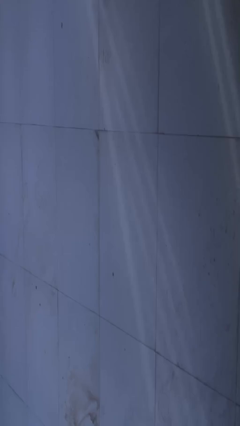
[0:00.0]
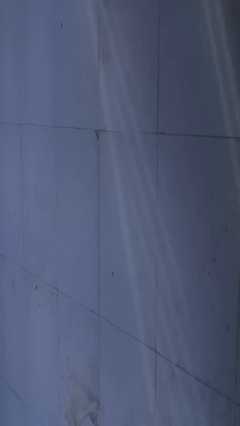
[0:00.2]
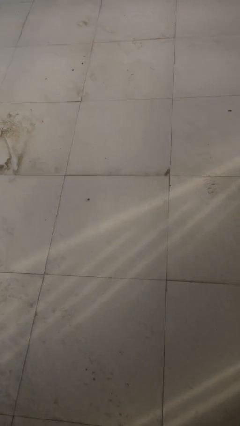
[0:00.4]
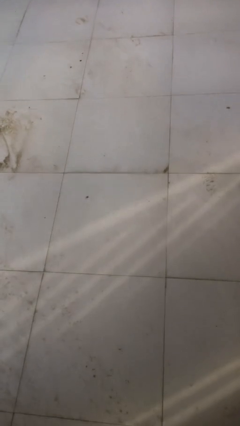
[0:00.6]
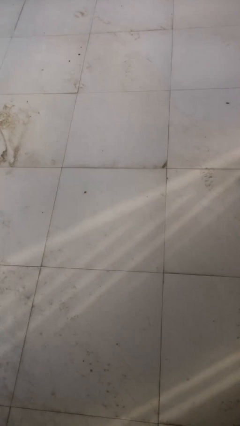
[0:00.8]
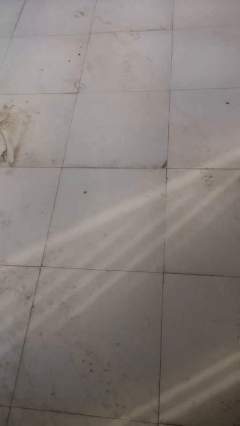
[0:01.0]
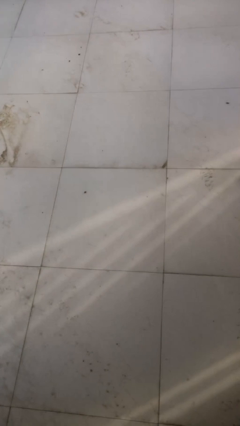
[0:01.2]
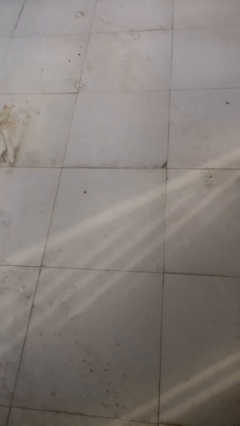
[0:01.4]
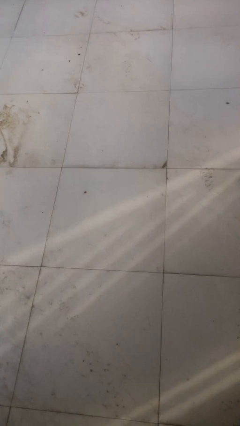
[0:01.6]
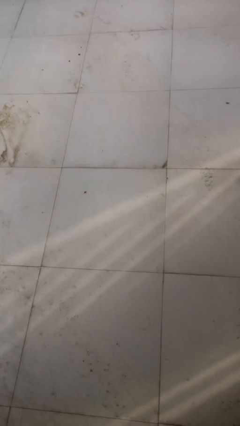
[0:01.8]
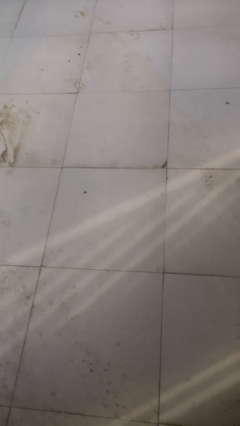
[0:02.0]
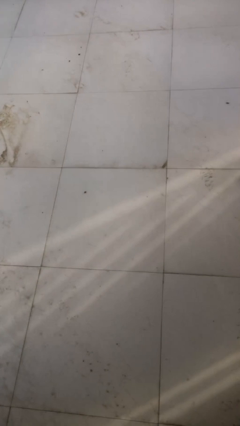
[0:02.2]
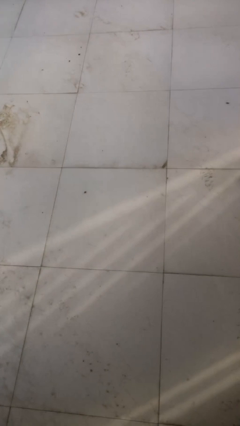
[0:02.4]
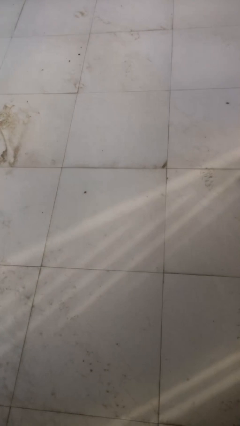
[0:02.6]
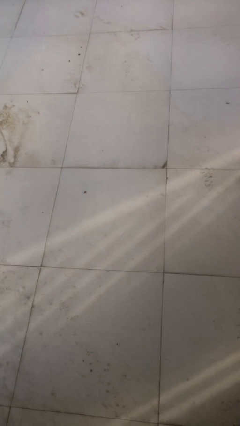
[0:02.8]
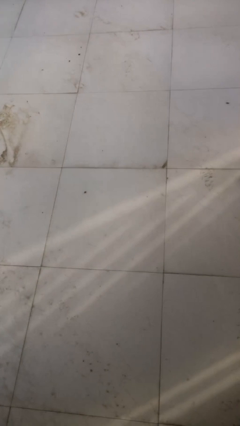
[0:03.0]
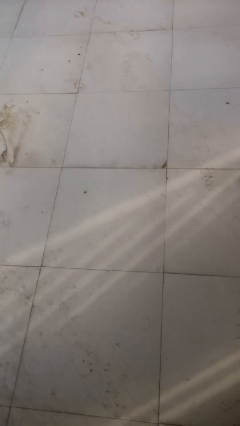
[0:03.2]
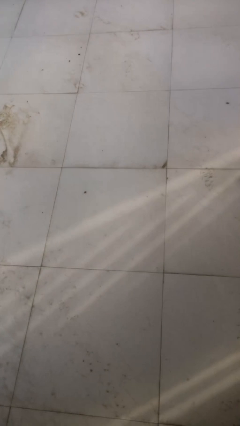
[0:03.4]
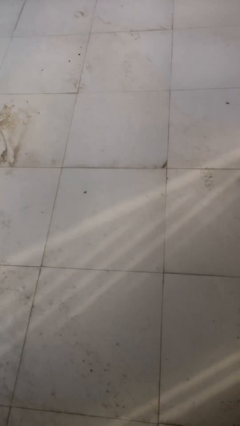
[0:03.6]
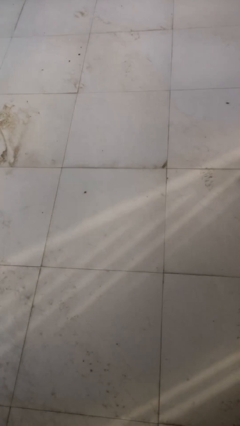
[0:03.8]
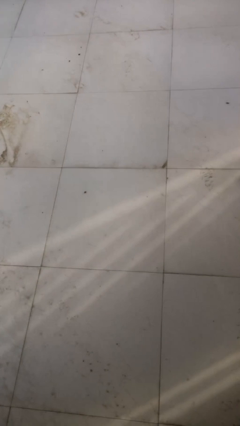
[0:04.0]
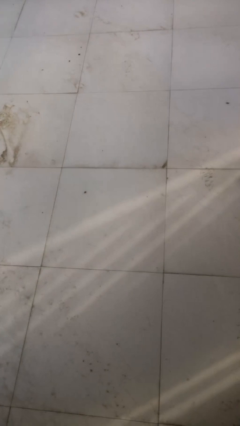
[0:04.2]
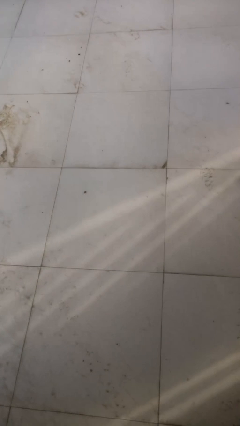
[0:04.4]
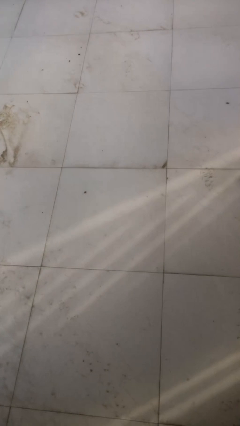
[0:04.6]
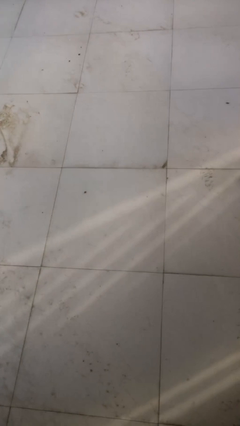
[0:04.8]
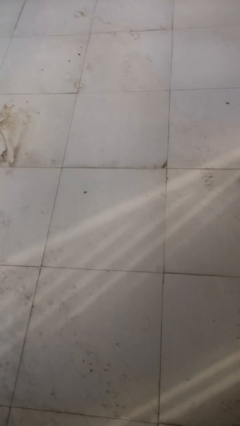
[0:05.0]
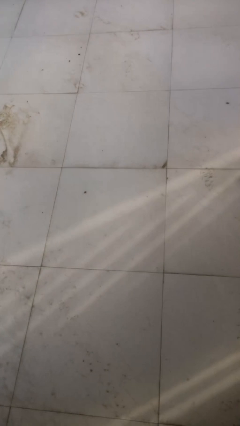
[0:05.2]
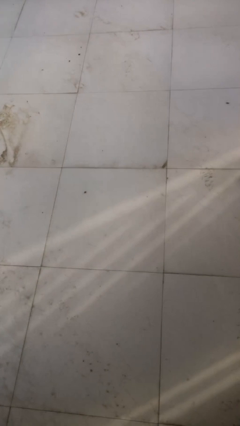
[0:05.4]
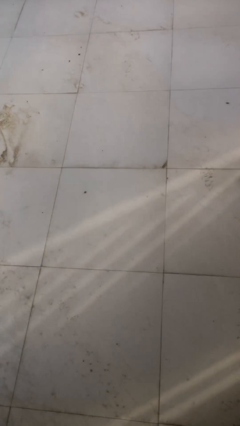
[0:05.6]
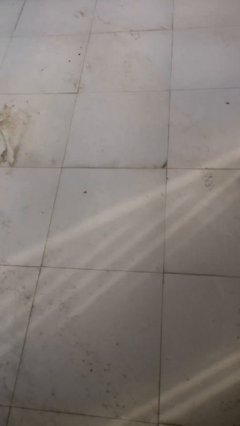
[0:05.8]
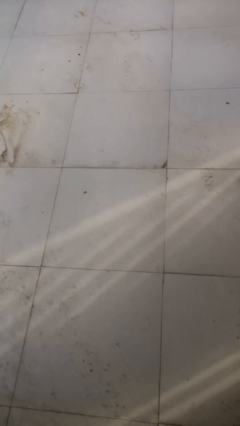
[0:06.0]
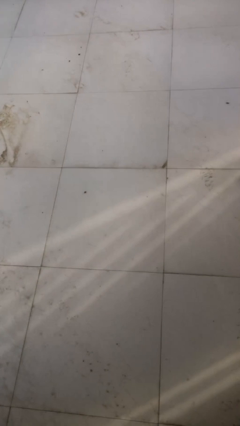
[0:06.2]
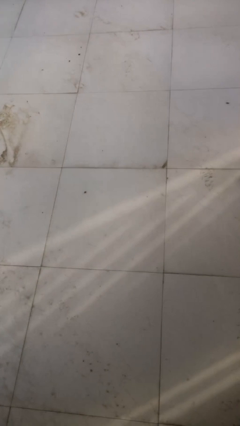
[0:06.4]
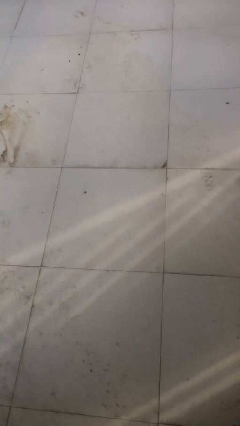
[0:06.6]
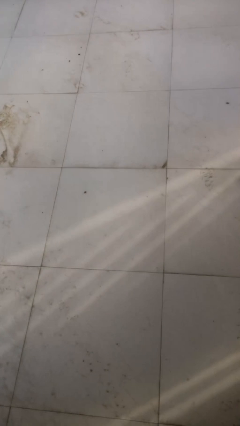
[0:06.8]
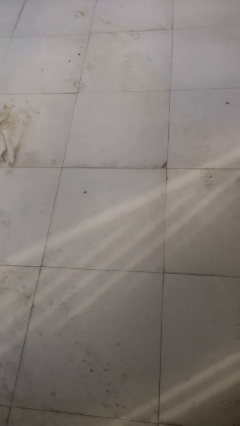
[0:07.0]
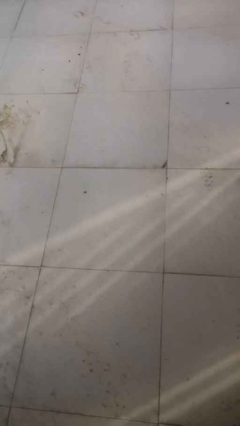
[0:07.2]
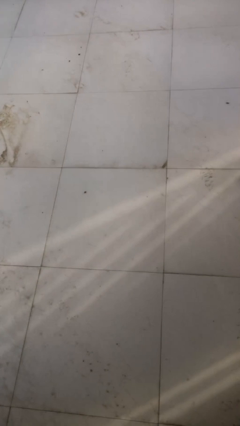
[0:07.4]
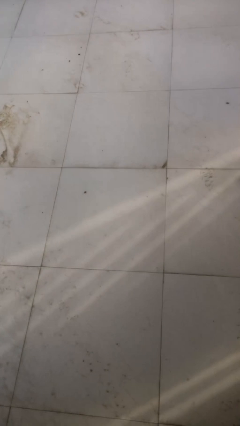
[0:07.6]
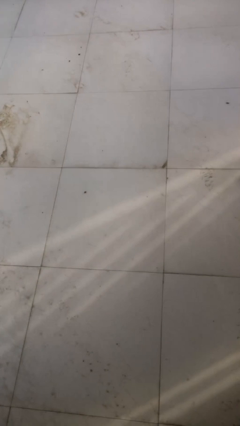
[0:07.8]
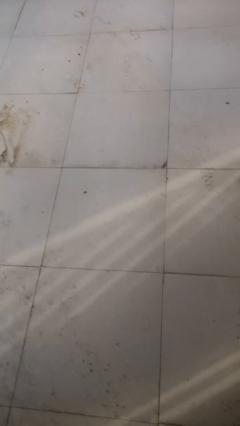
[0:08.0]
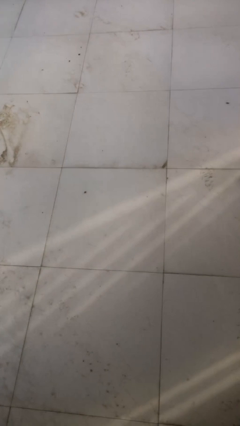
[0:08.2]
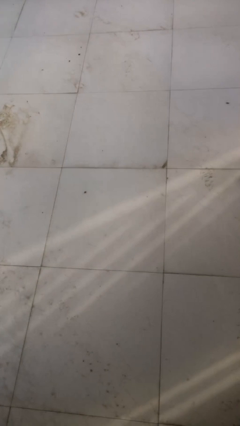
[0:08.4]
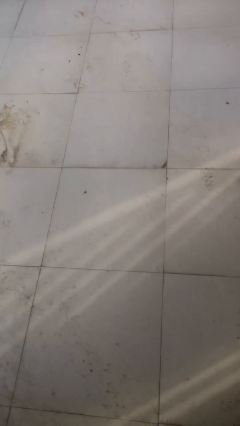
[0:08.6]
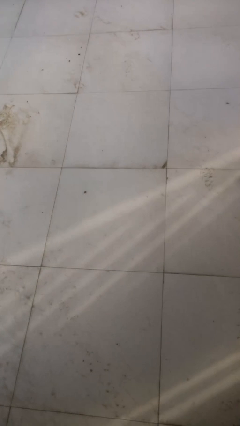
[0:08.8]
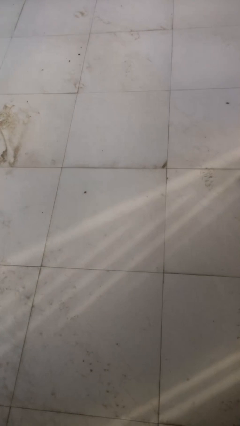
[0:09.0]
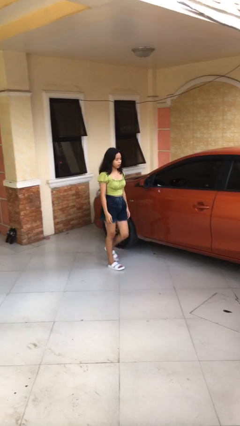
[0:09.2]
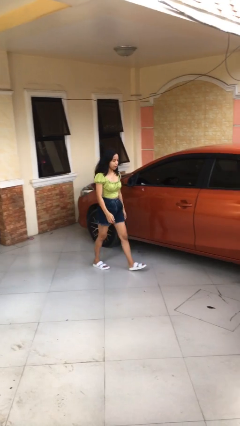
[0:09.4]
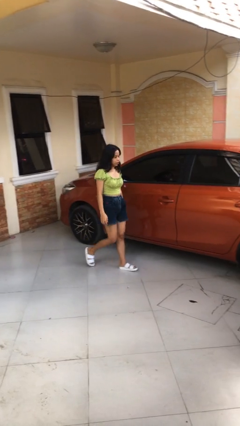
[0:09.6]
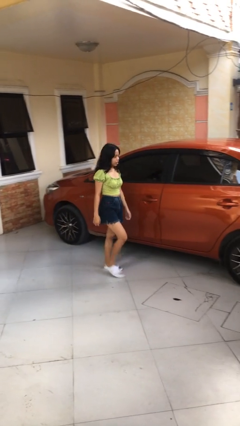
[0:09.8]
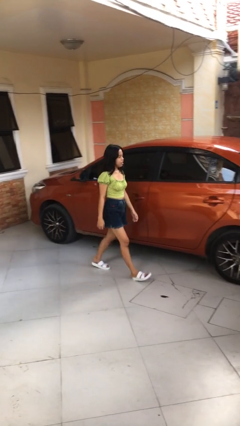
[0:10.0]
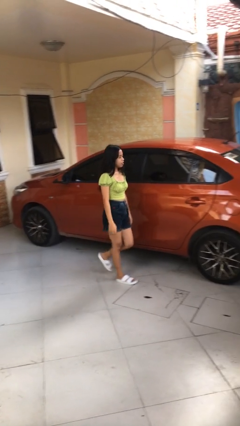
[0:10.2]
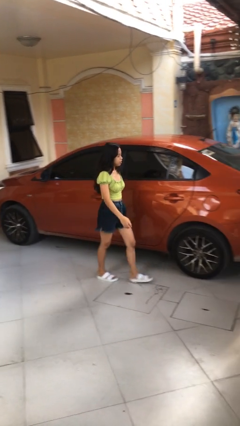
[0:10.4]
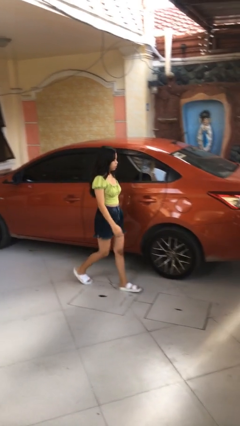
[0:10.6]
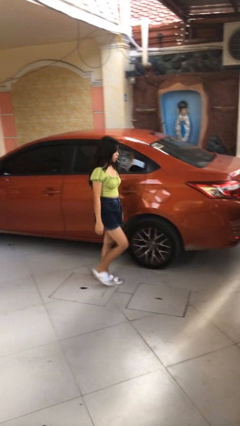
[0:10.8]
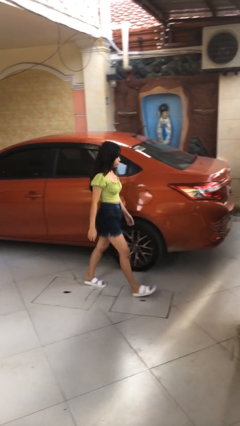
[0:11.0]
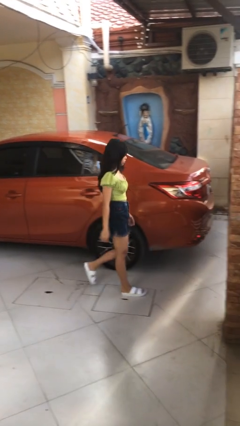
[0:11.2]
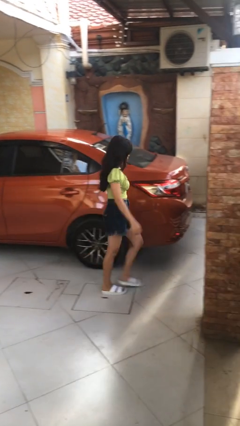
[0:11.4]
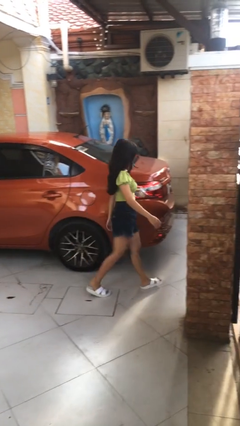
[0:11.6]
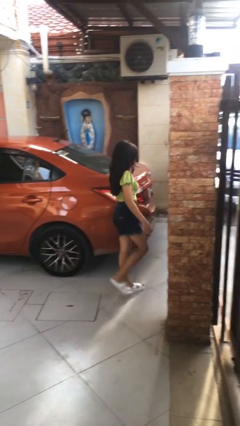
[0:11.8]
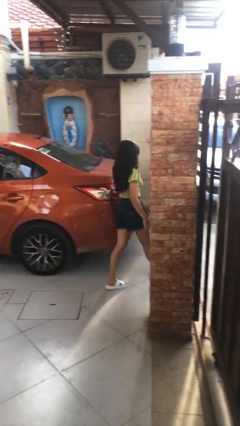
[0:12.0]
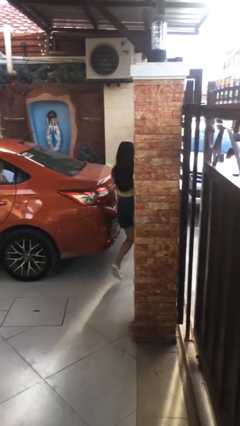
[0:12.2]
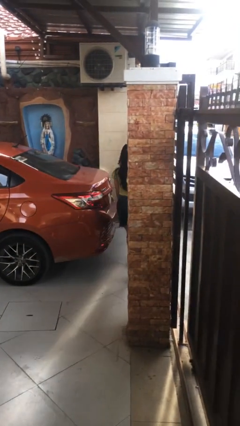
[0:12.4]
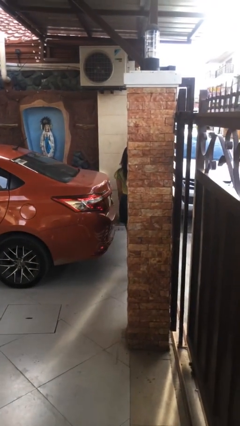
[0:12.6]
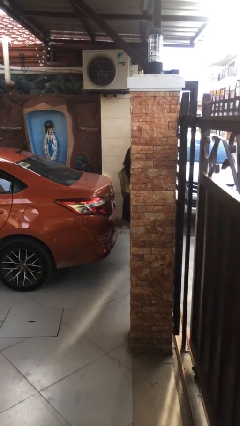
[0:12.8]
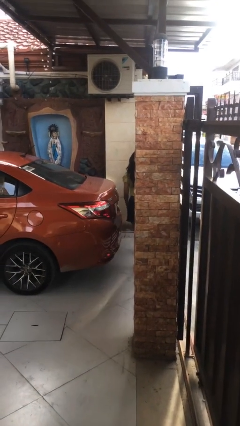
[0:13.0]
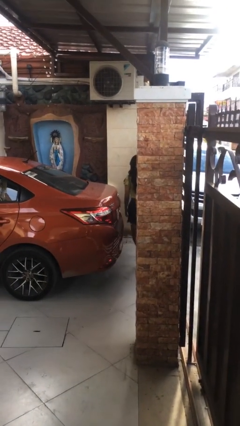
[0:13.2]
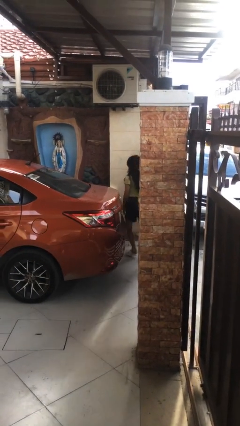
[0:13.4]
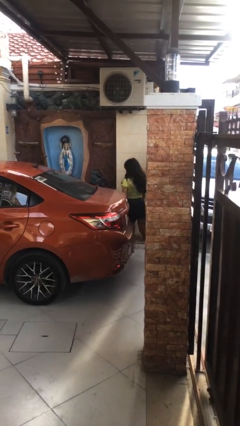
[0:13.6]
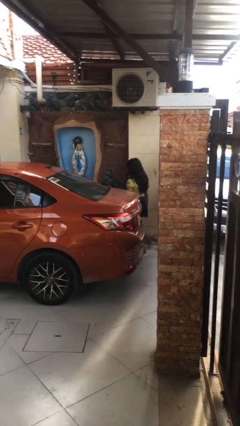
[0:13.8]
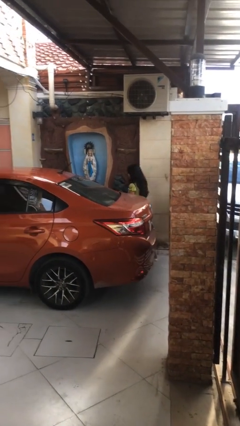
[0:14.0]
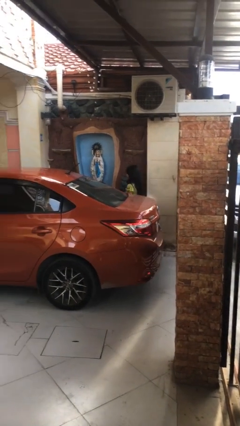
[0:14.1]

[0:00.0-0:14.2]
person walks around car

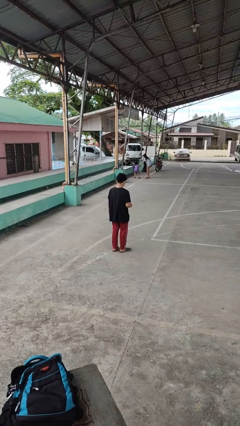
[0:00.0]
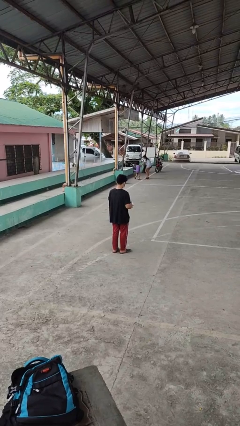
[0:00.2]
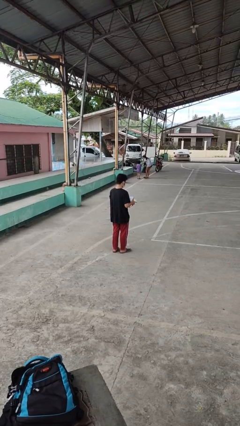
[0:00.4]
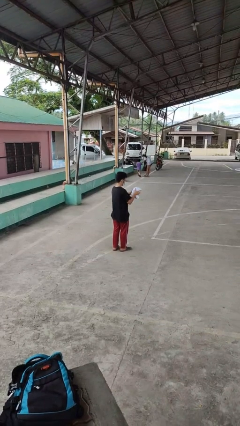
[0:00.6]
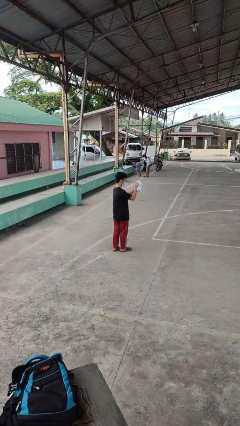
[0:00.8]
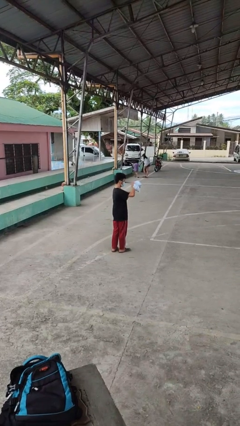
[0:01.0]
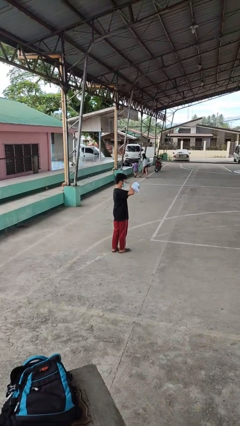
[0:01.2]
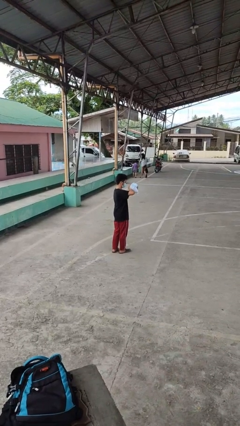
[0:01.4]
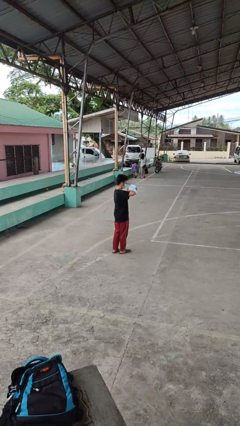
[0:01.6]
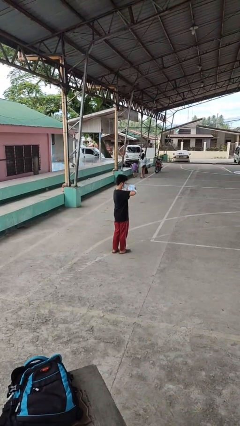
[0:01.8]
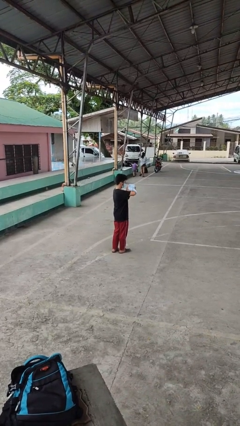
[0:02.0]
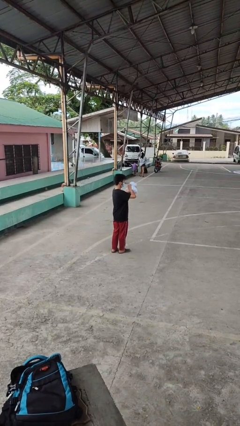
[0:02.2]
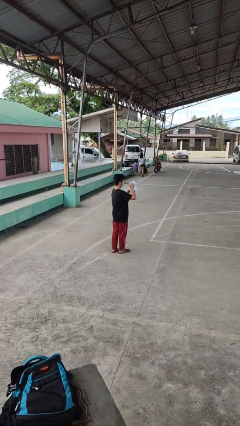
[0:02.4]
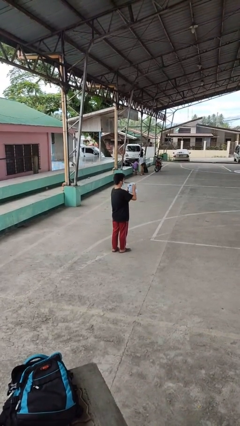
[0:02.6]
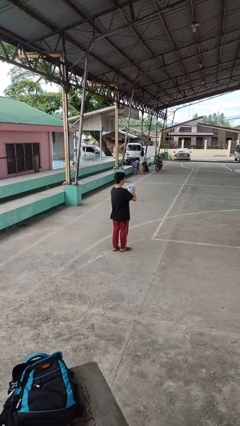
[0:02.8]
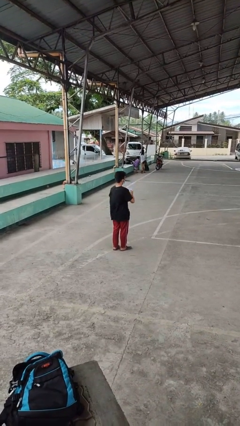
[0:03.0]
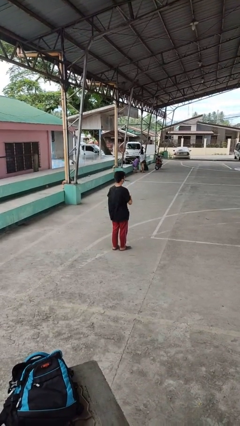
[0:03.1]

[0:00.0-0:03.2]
person squeezes object

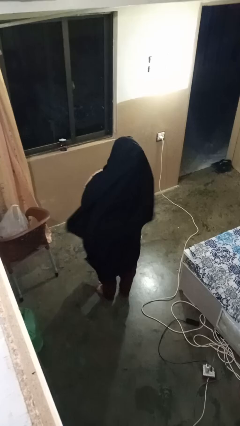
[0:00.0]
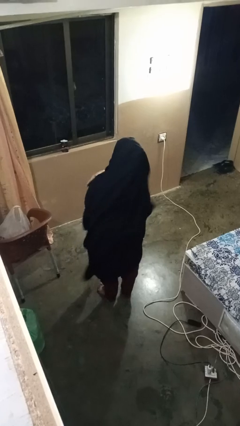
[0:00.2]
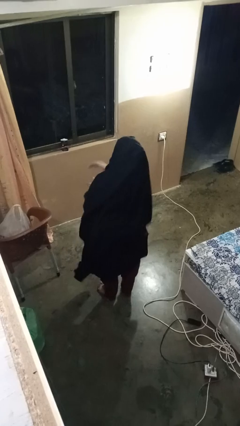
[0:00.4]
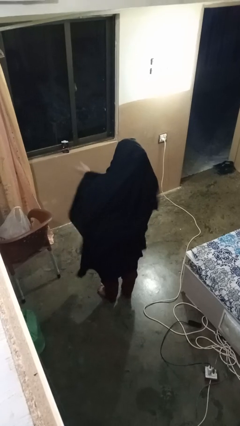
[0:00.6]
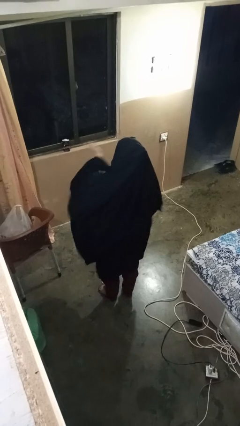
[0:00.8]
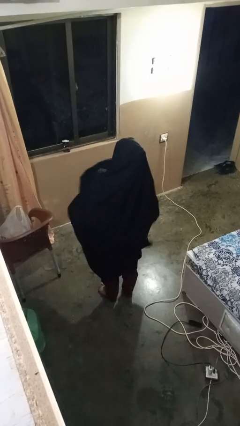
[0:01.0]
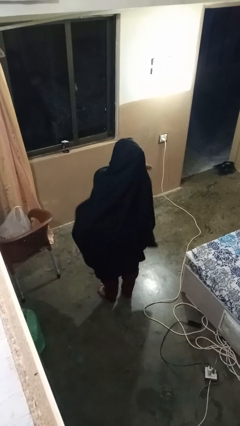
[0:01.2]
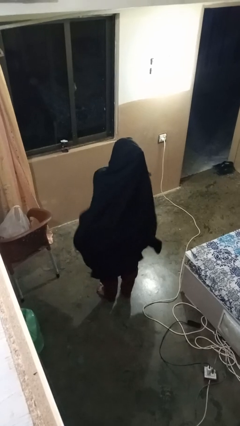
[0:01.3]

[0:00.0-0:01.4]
person gestures swipe right
